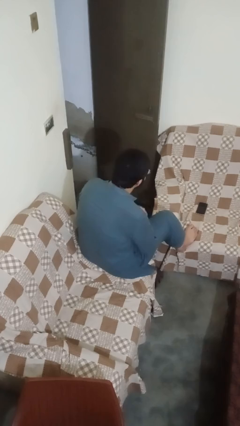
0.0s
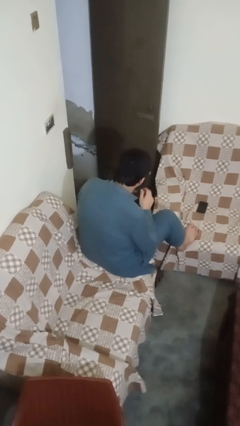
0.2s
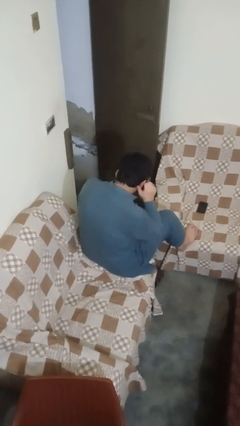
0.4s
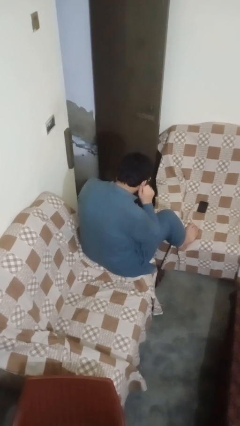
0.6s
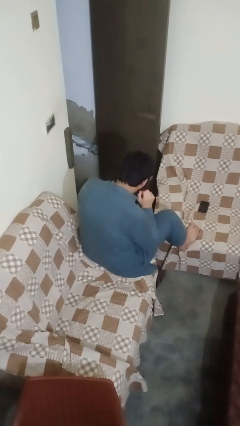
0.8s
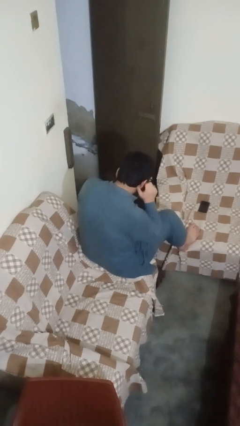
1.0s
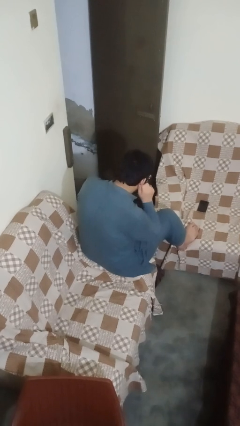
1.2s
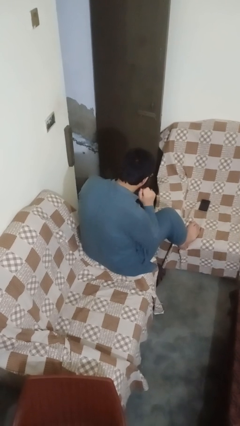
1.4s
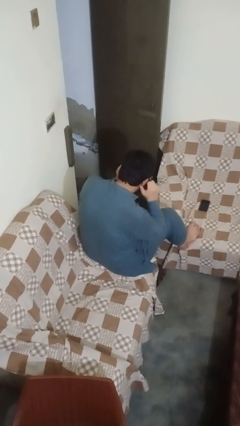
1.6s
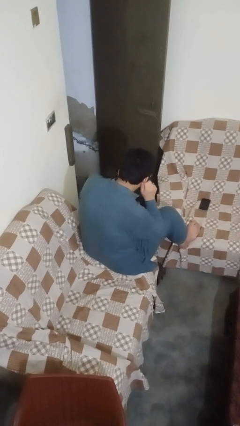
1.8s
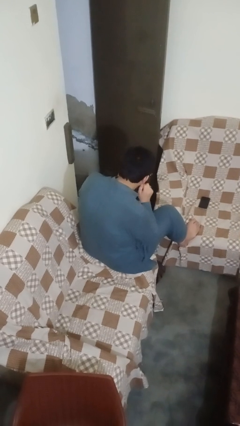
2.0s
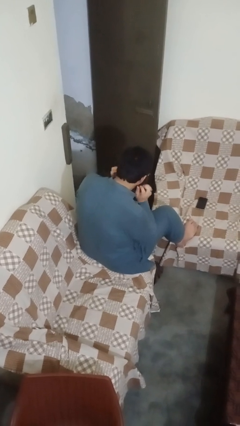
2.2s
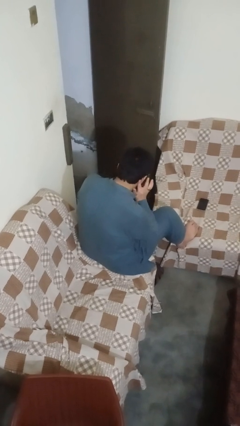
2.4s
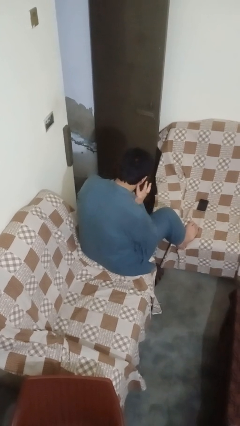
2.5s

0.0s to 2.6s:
person touches earlobe

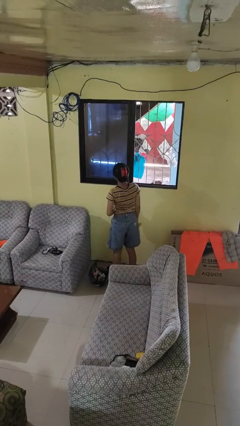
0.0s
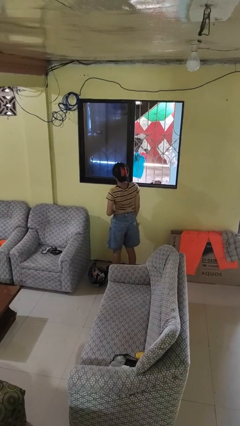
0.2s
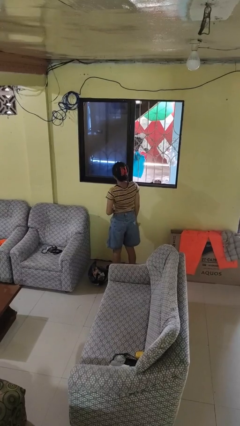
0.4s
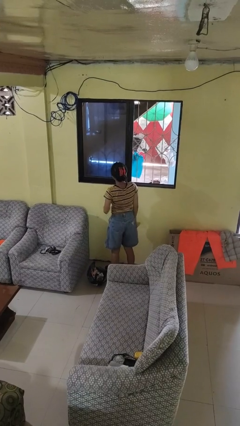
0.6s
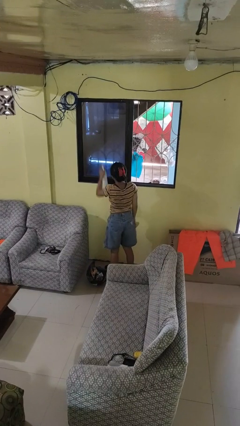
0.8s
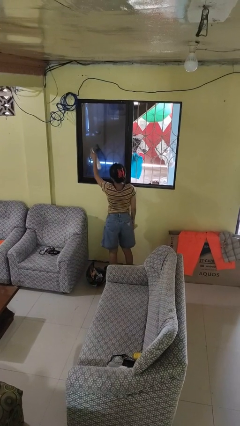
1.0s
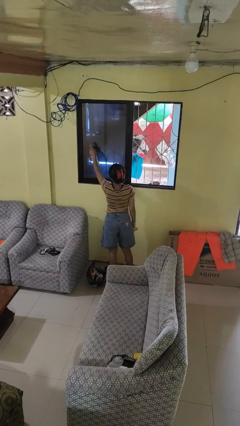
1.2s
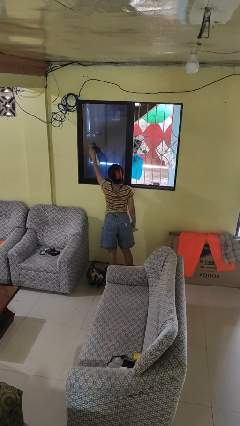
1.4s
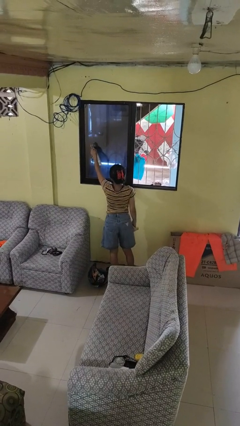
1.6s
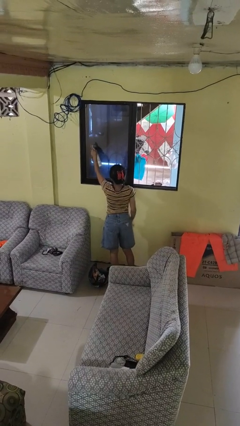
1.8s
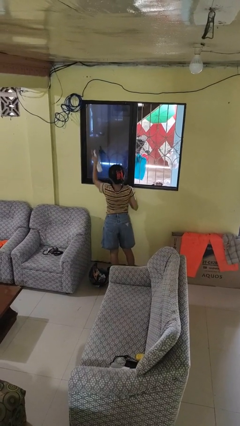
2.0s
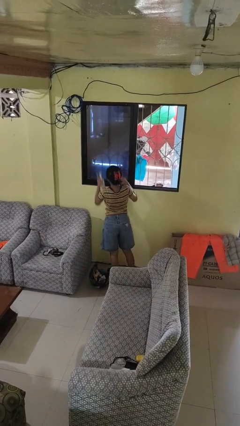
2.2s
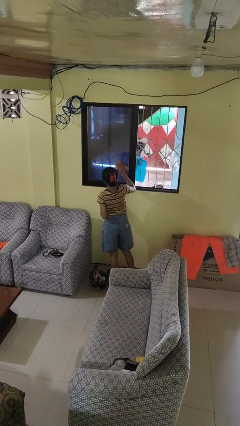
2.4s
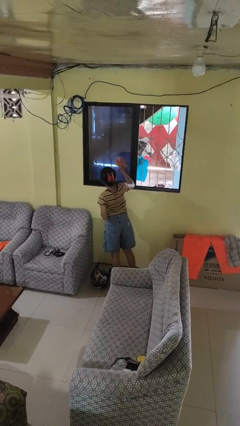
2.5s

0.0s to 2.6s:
person sprays from bottle

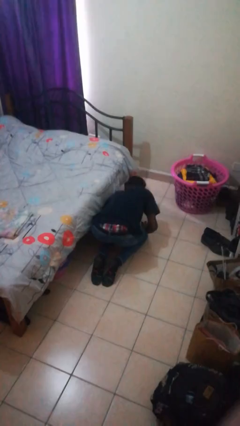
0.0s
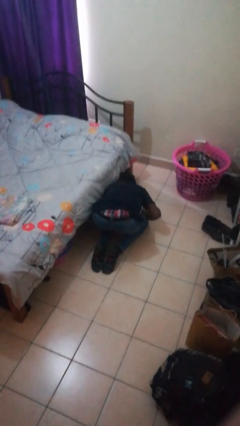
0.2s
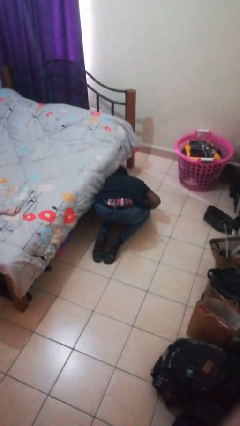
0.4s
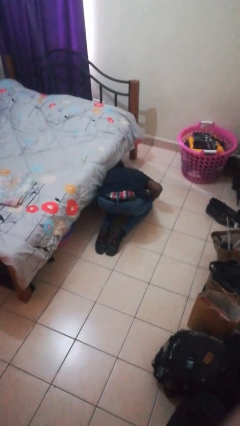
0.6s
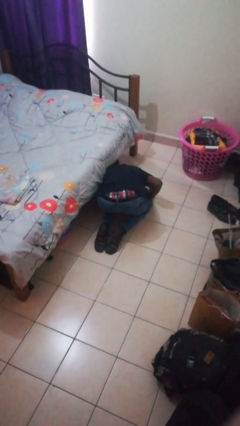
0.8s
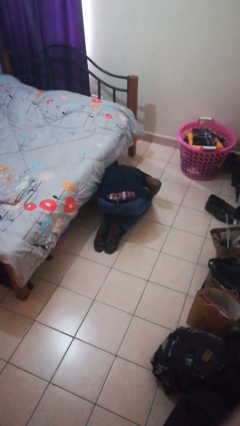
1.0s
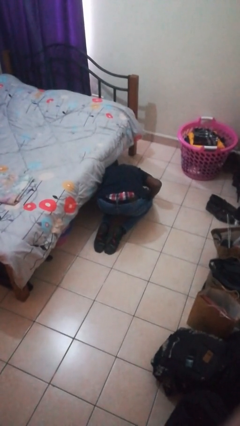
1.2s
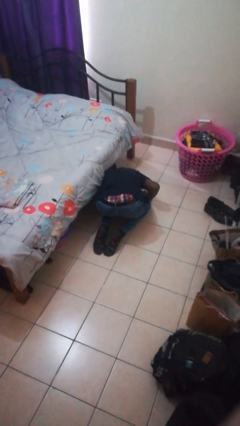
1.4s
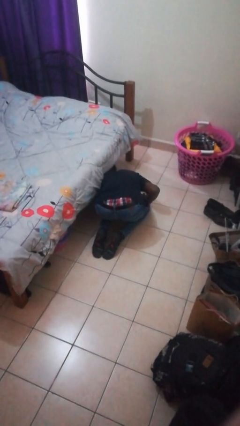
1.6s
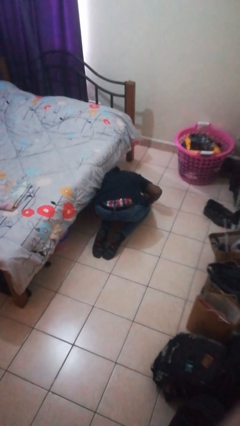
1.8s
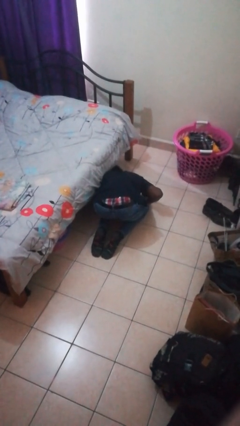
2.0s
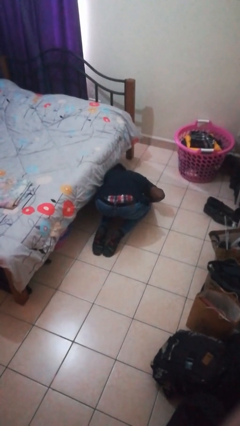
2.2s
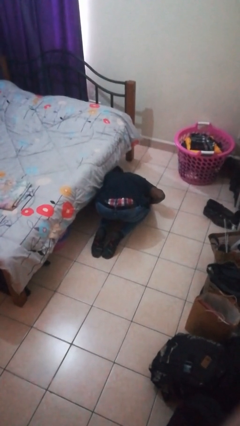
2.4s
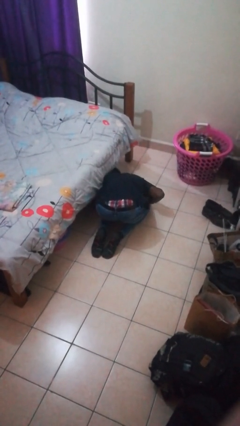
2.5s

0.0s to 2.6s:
person searches under bed

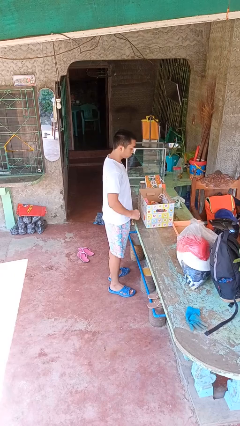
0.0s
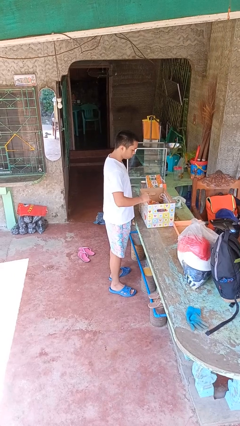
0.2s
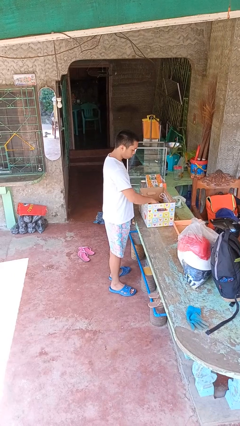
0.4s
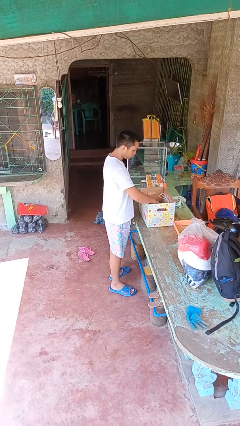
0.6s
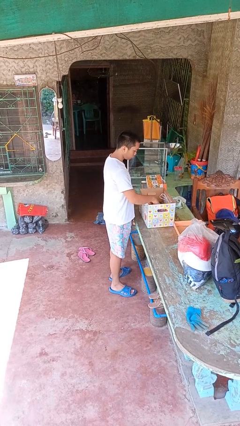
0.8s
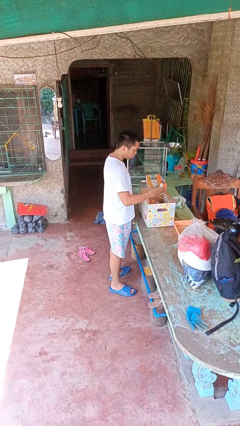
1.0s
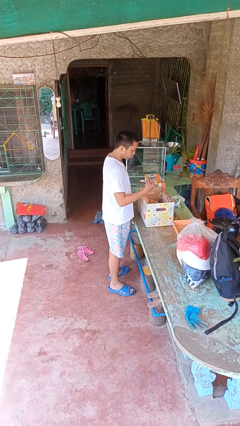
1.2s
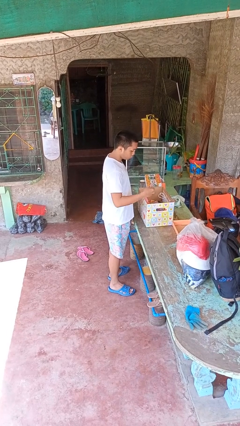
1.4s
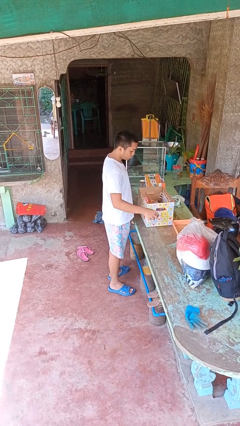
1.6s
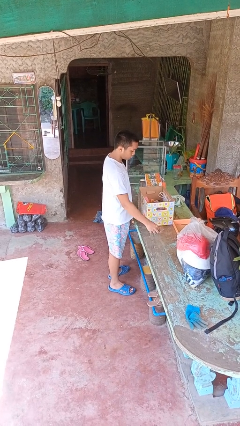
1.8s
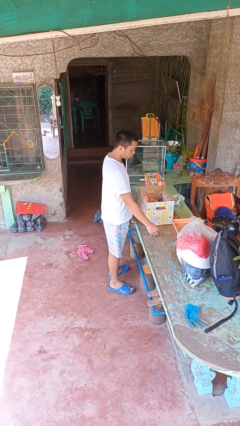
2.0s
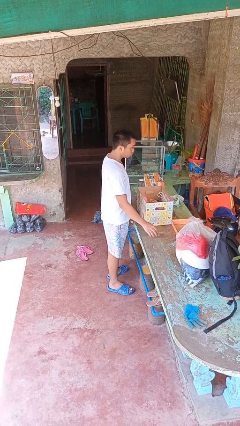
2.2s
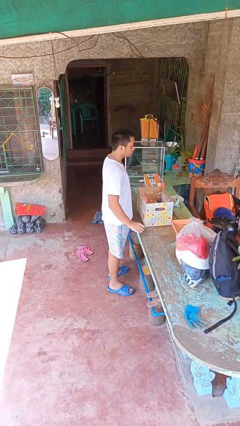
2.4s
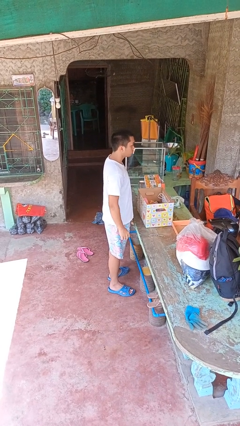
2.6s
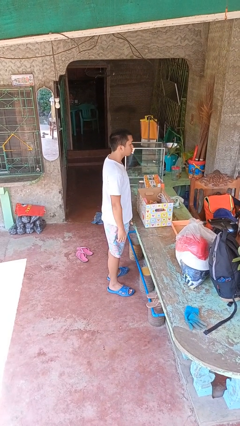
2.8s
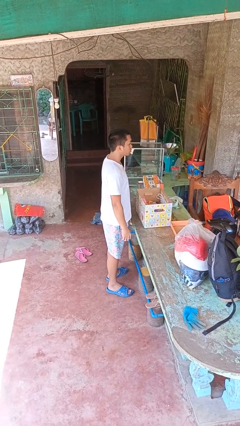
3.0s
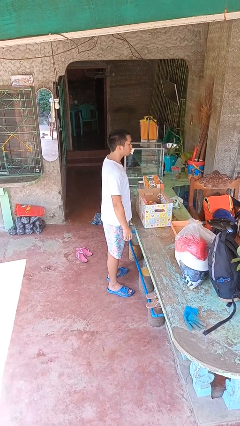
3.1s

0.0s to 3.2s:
person takes object from box

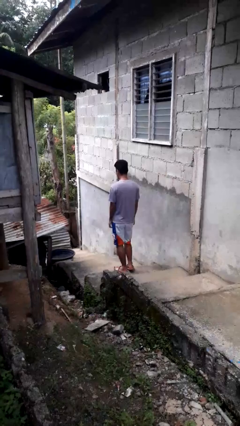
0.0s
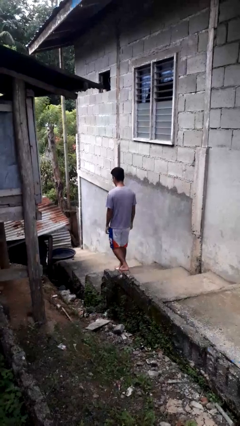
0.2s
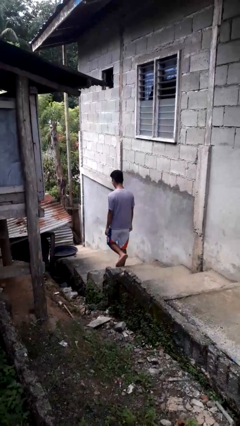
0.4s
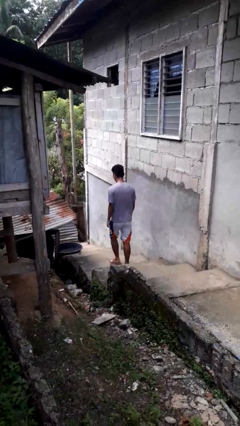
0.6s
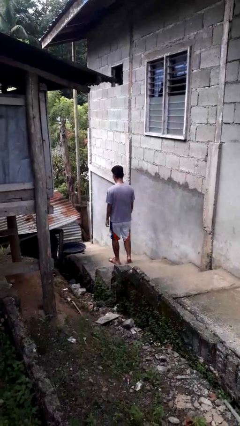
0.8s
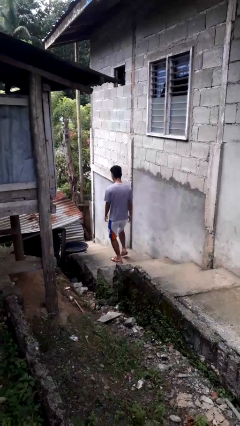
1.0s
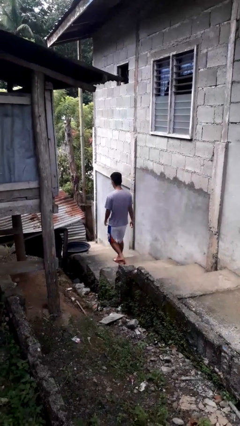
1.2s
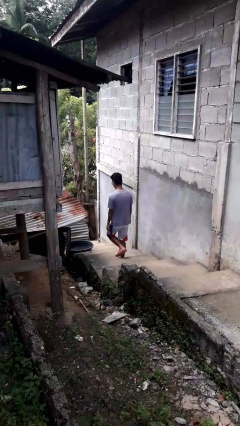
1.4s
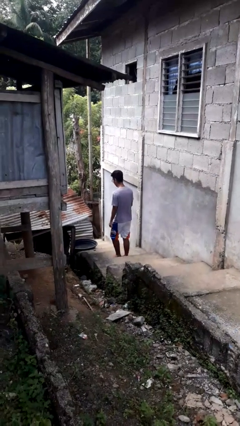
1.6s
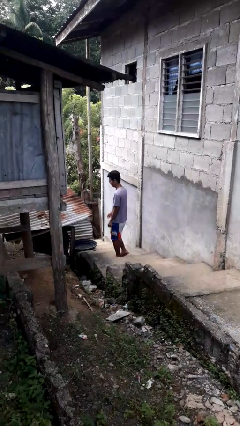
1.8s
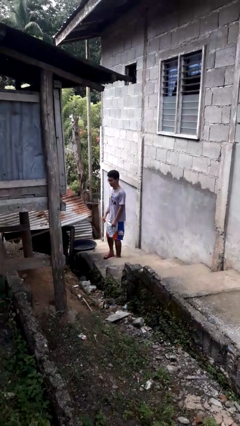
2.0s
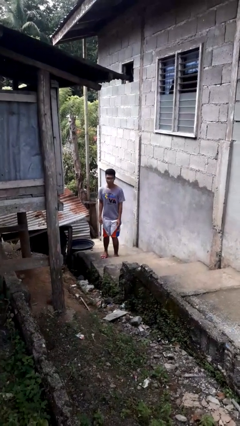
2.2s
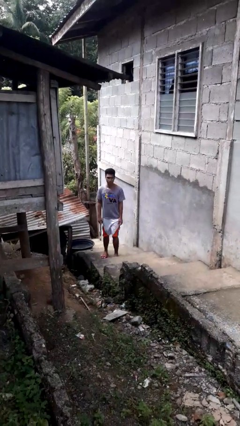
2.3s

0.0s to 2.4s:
person climbs down stairs

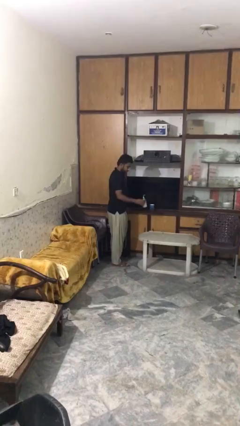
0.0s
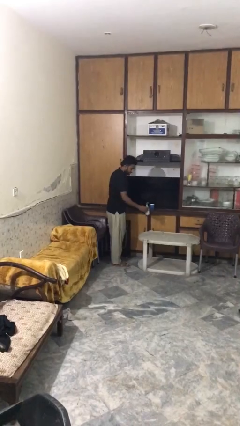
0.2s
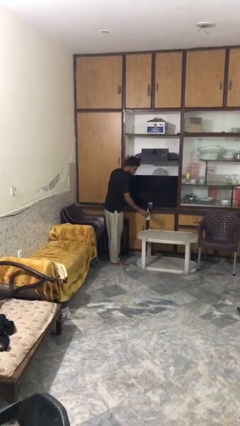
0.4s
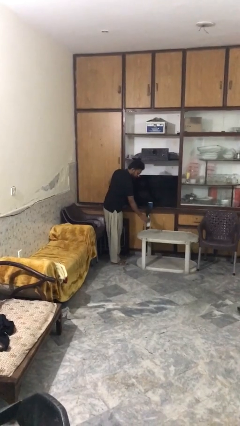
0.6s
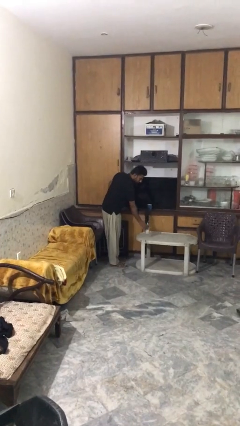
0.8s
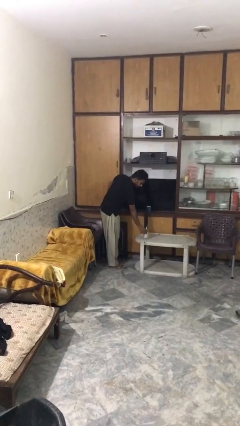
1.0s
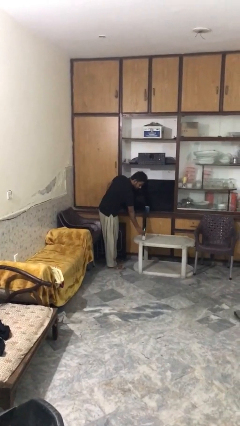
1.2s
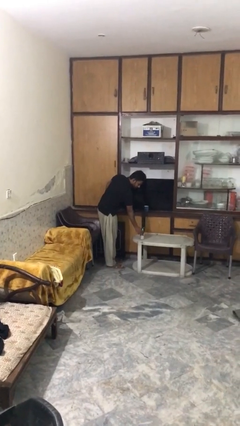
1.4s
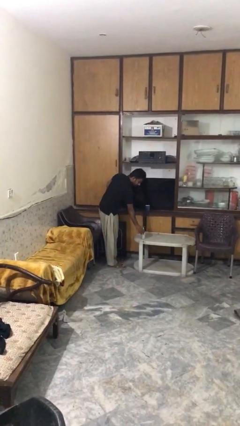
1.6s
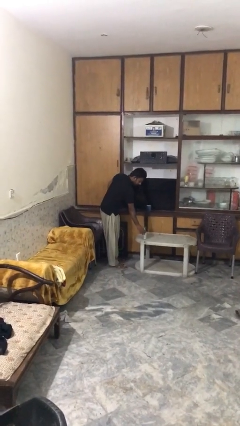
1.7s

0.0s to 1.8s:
person puts down object on table

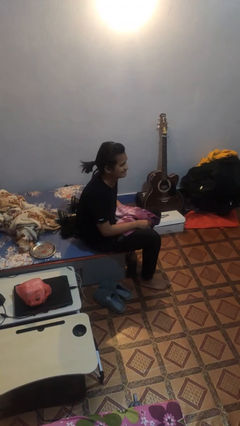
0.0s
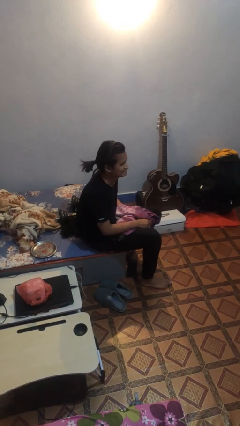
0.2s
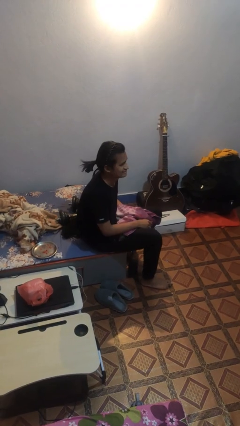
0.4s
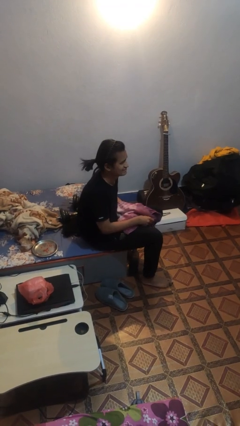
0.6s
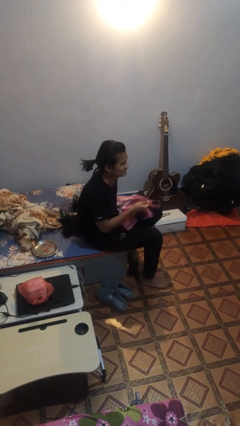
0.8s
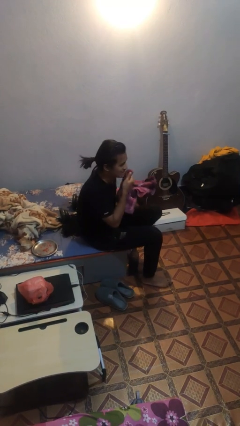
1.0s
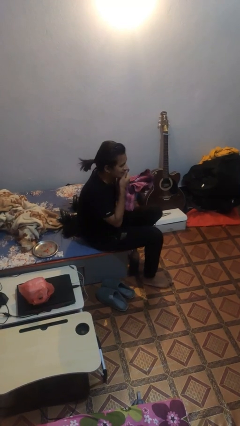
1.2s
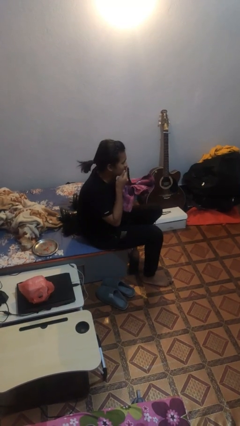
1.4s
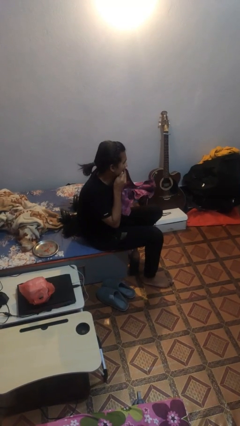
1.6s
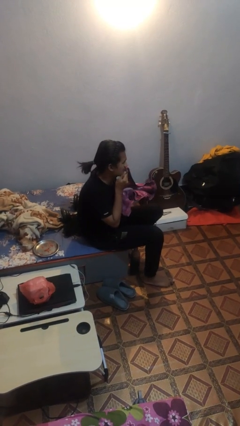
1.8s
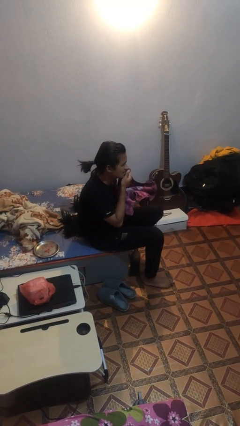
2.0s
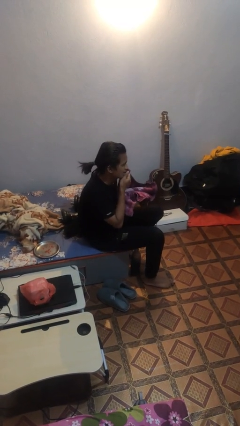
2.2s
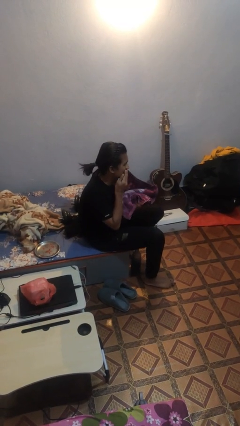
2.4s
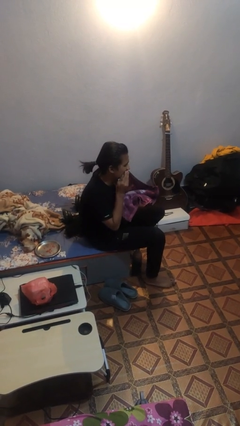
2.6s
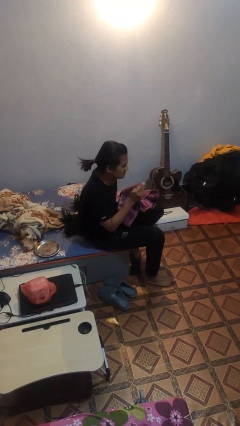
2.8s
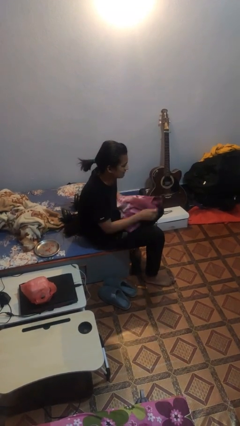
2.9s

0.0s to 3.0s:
person wipes mouth with napkin
